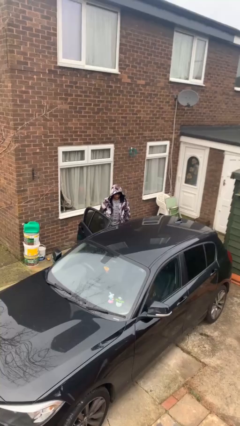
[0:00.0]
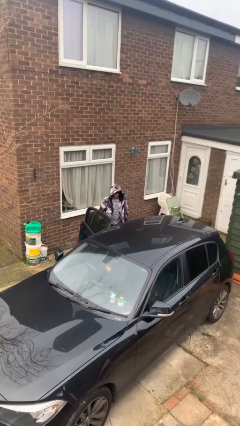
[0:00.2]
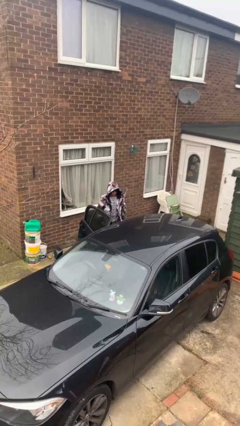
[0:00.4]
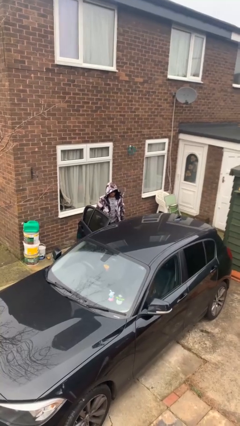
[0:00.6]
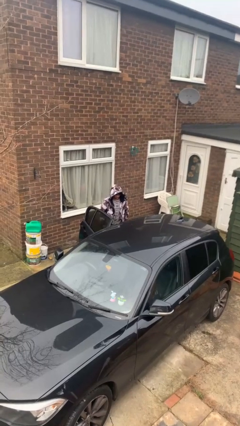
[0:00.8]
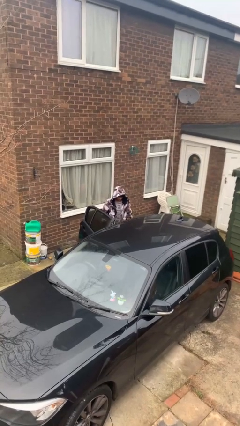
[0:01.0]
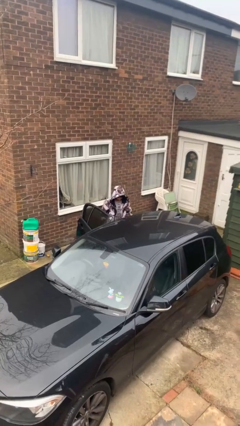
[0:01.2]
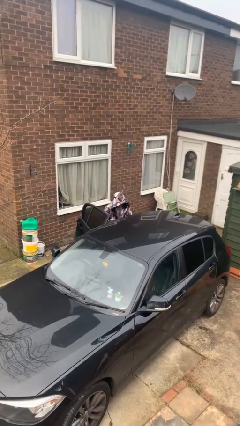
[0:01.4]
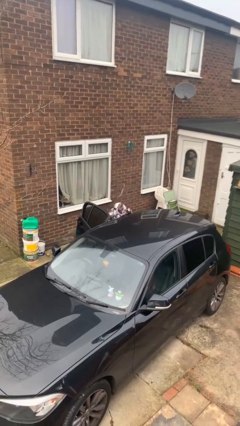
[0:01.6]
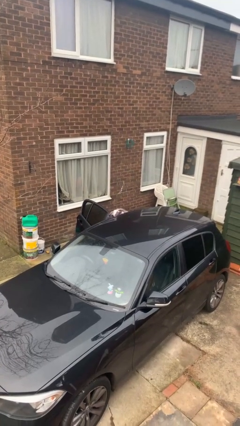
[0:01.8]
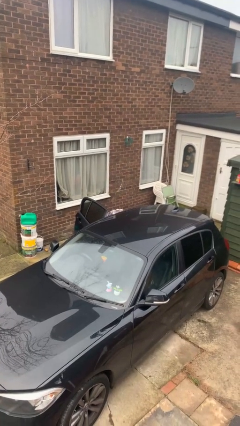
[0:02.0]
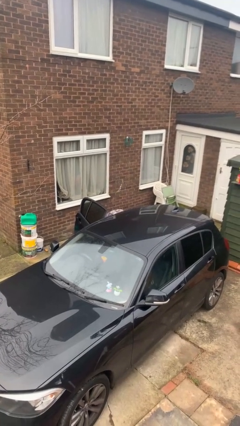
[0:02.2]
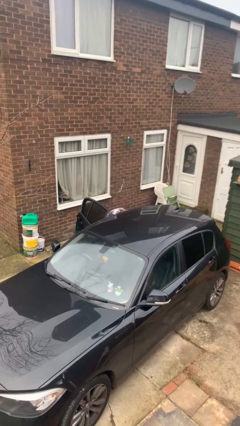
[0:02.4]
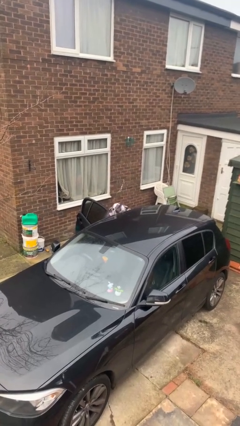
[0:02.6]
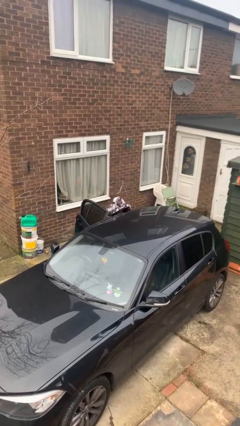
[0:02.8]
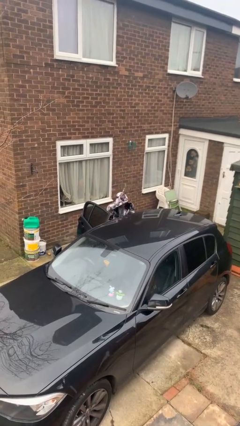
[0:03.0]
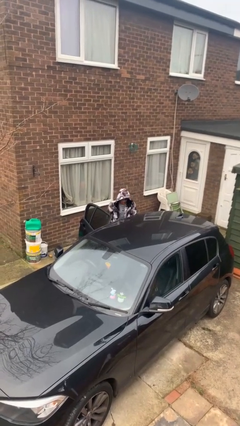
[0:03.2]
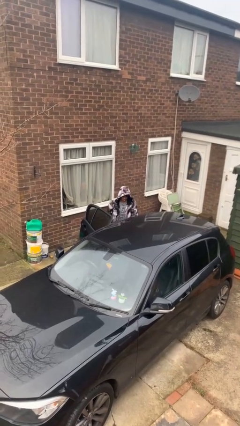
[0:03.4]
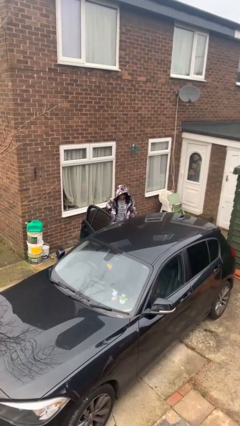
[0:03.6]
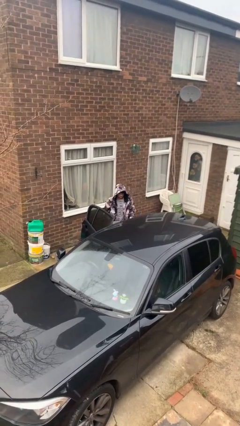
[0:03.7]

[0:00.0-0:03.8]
person unloads car

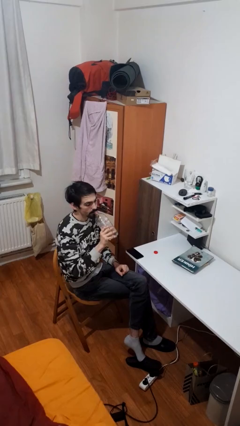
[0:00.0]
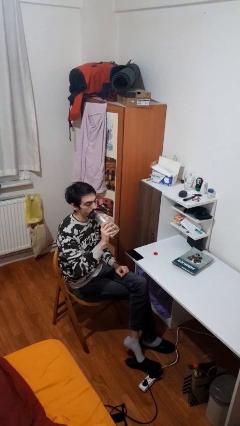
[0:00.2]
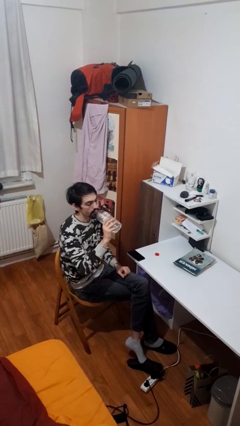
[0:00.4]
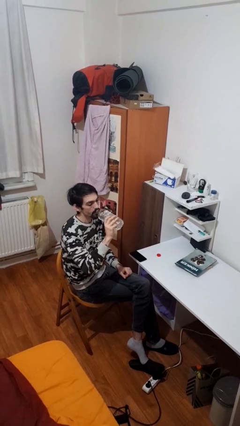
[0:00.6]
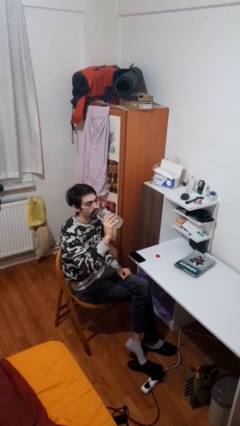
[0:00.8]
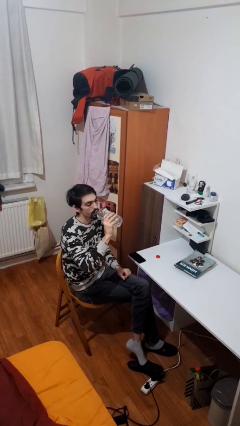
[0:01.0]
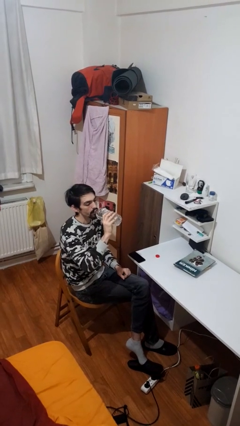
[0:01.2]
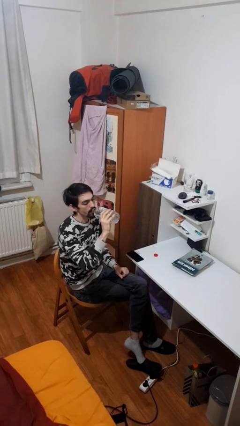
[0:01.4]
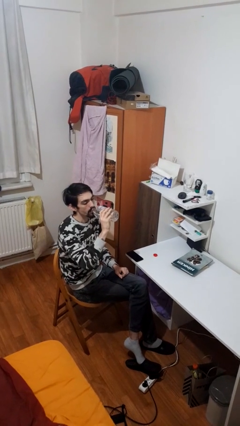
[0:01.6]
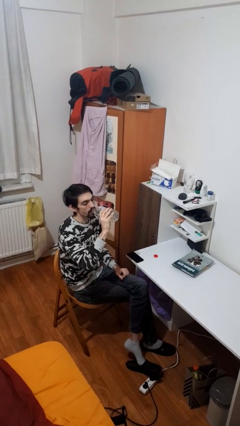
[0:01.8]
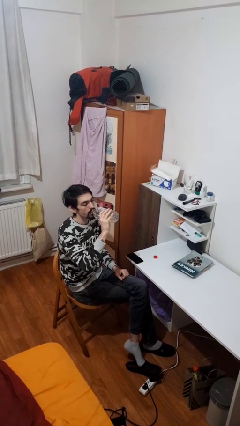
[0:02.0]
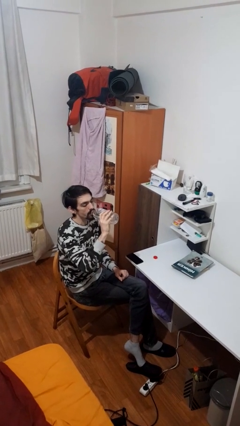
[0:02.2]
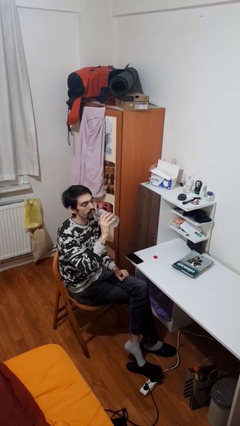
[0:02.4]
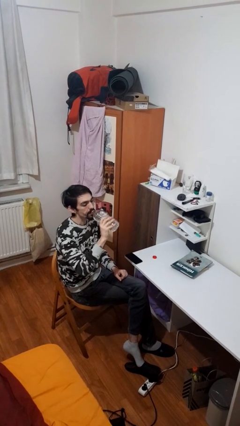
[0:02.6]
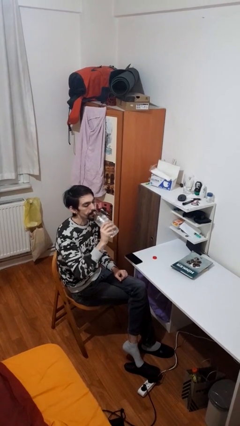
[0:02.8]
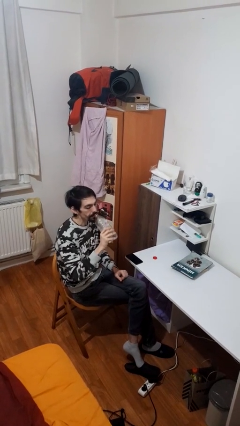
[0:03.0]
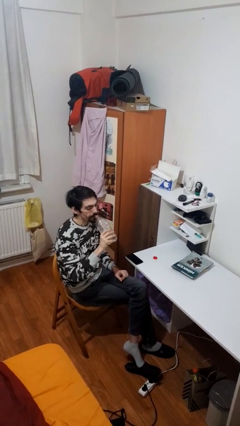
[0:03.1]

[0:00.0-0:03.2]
person drinks from bottle

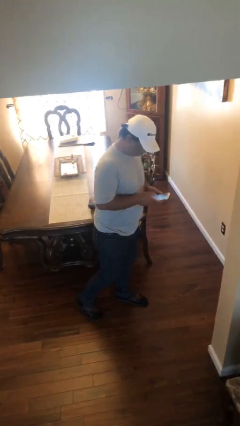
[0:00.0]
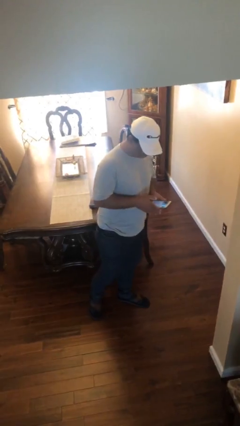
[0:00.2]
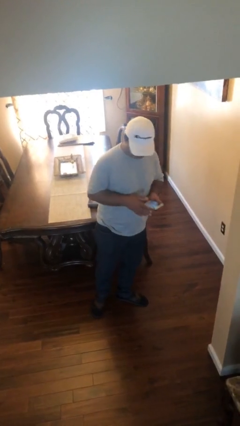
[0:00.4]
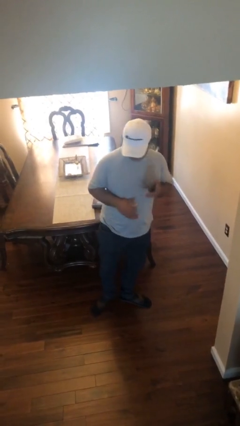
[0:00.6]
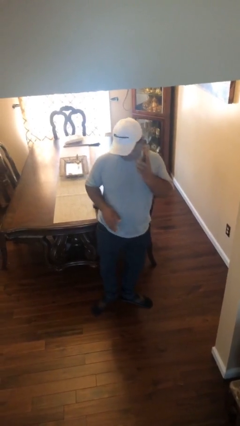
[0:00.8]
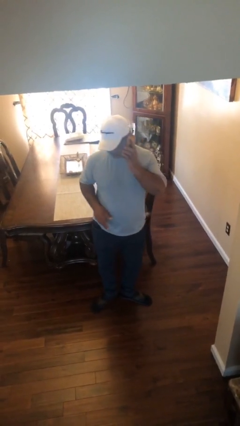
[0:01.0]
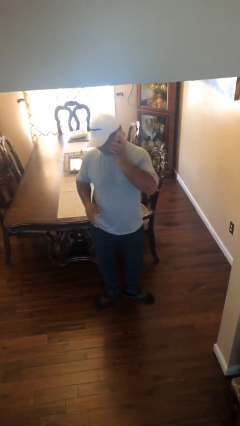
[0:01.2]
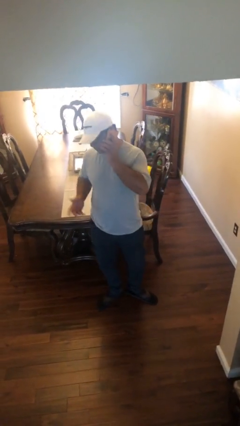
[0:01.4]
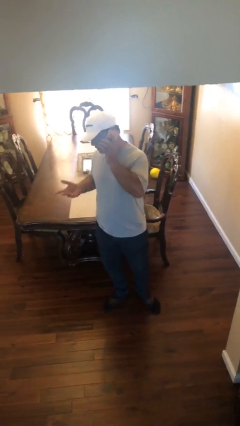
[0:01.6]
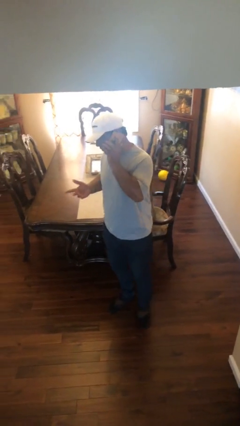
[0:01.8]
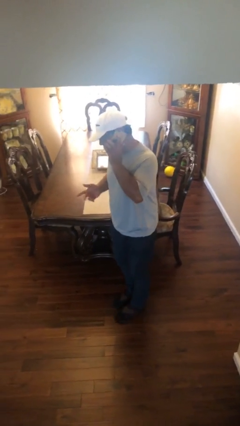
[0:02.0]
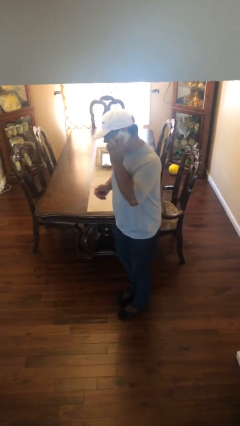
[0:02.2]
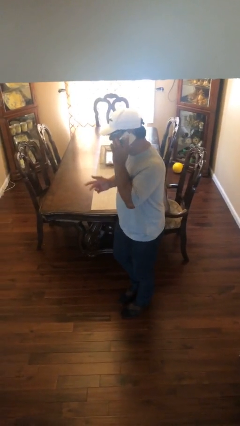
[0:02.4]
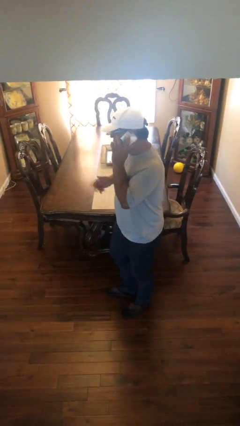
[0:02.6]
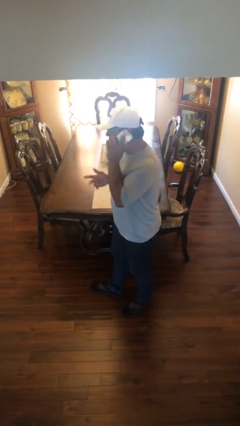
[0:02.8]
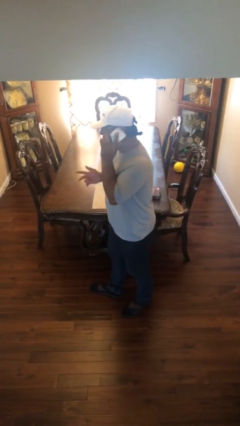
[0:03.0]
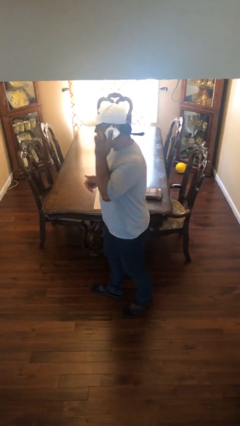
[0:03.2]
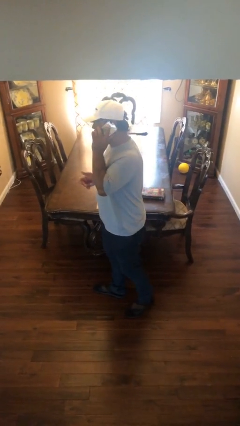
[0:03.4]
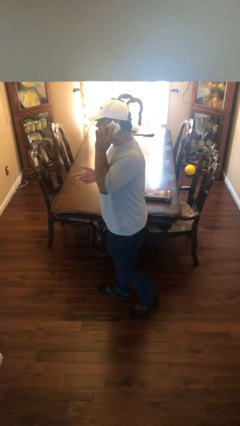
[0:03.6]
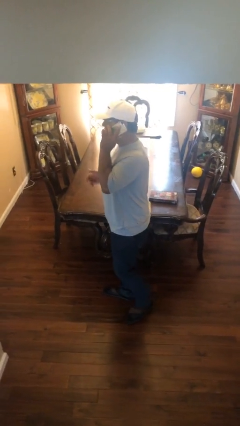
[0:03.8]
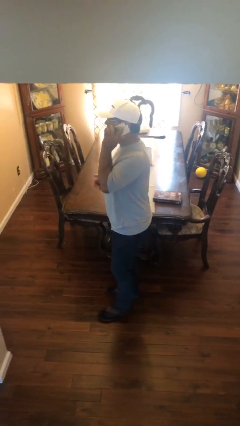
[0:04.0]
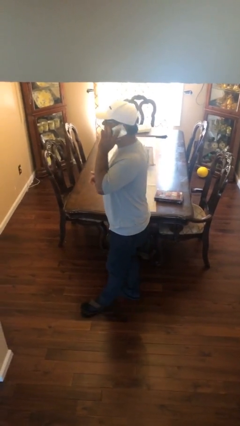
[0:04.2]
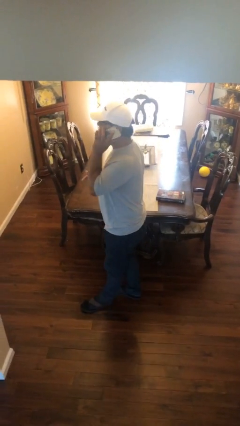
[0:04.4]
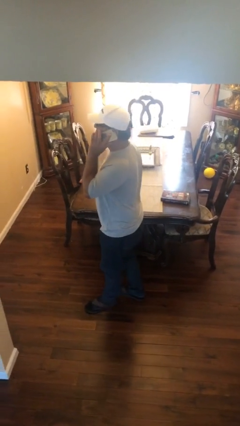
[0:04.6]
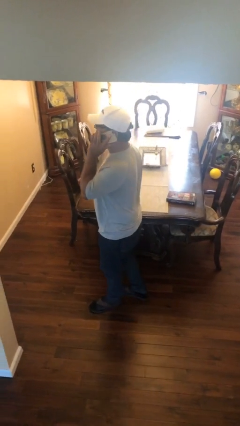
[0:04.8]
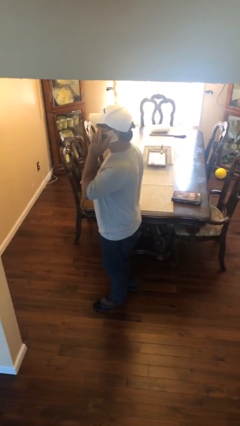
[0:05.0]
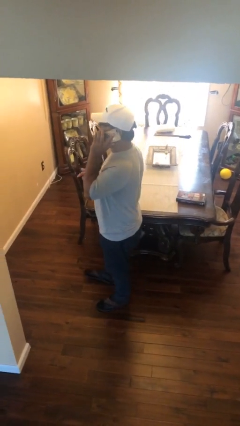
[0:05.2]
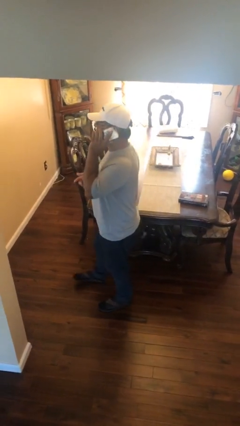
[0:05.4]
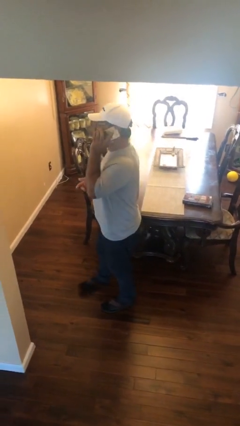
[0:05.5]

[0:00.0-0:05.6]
person talks on phone

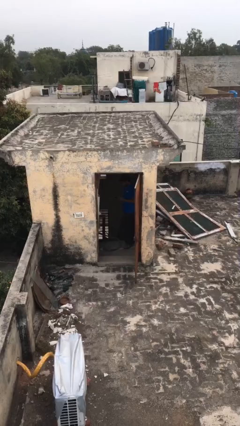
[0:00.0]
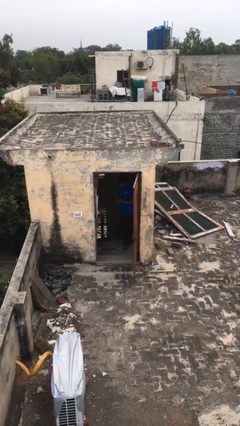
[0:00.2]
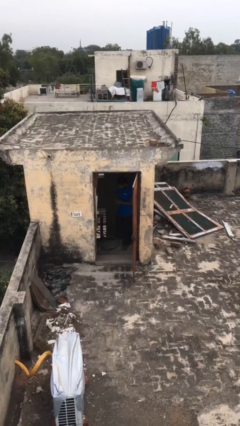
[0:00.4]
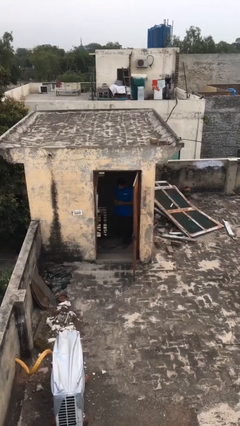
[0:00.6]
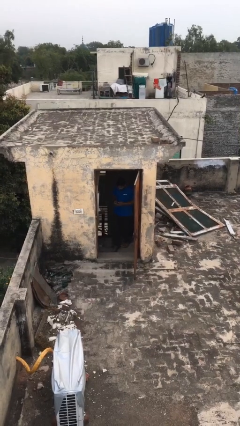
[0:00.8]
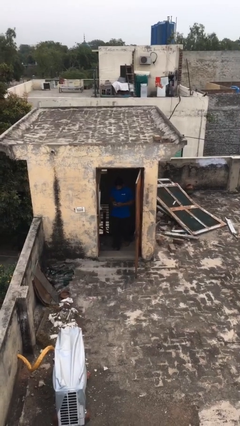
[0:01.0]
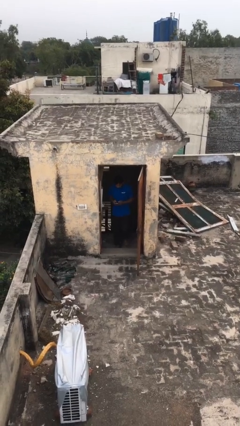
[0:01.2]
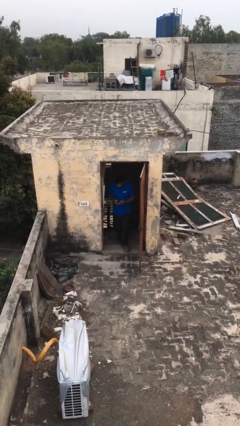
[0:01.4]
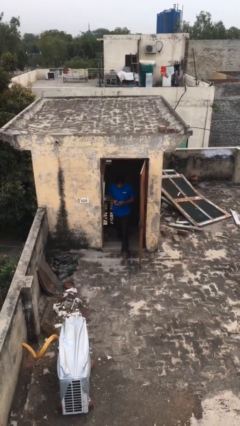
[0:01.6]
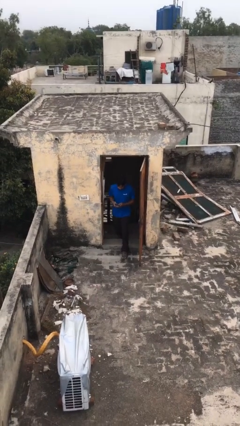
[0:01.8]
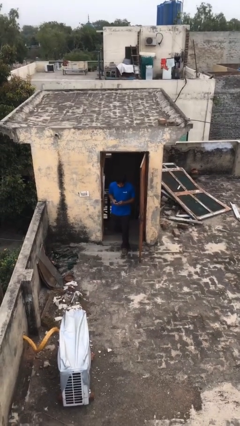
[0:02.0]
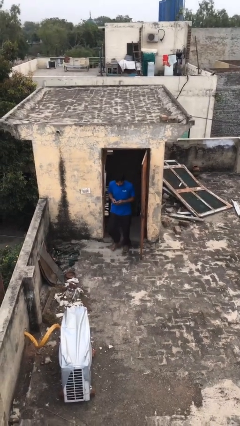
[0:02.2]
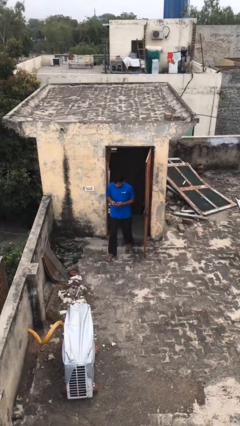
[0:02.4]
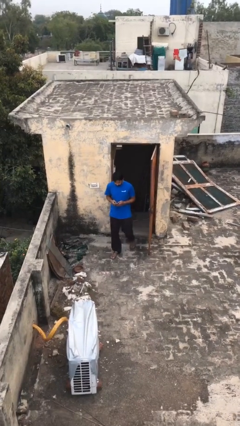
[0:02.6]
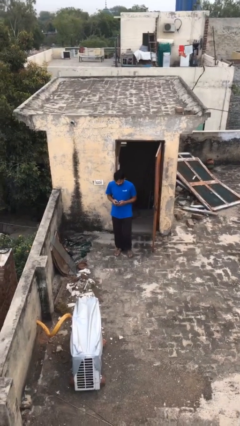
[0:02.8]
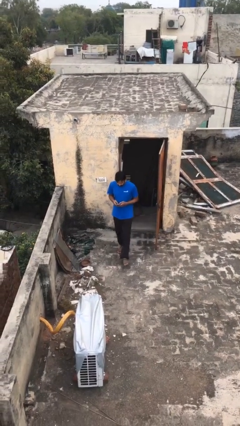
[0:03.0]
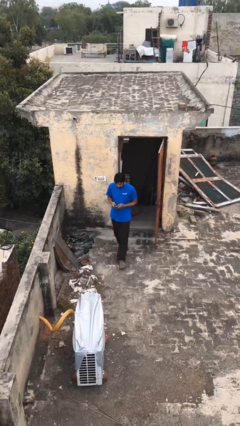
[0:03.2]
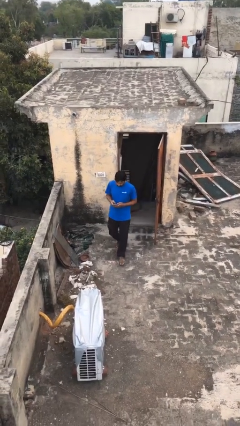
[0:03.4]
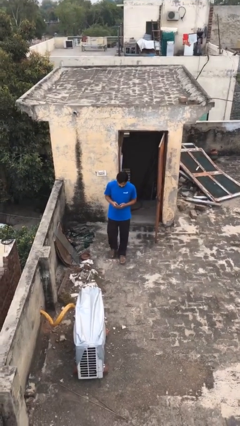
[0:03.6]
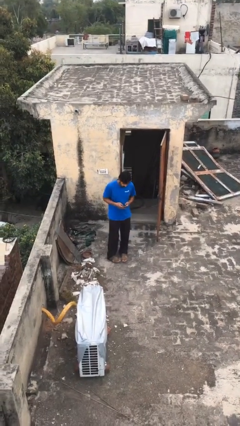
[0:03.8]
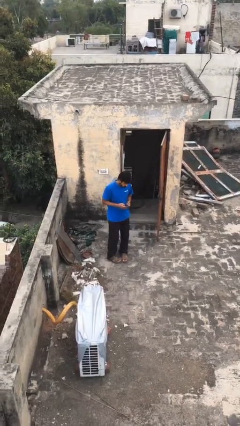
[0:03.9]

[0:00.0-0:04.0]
person enters scene through structure

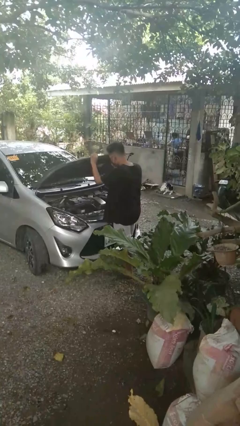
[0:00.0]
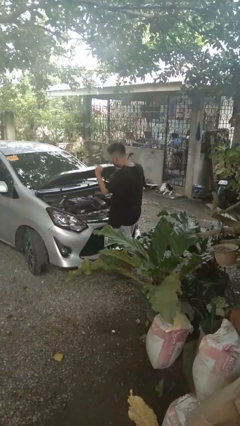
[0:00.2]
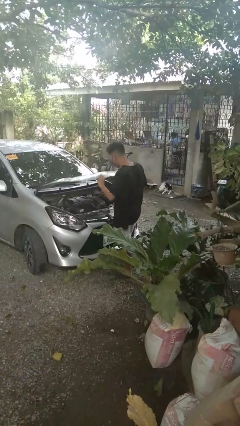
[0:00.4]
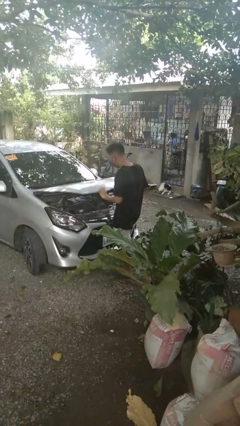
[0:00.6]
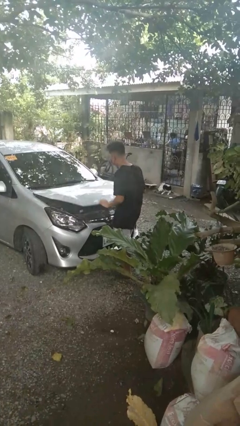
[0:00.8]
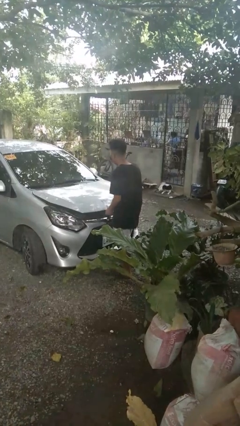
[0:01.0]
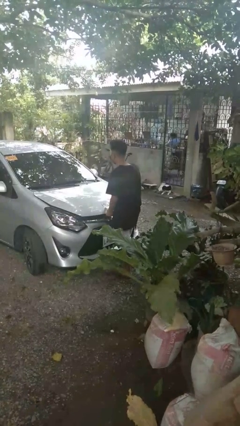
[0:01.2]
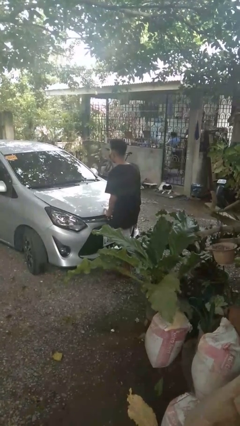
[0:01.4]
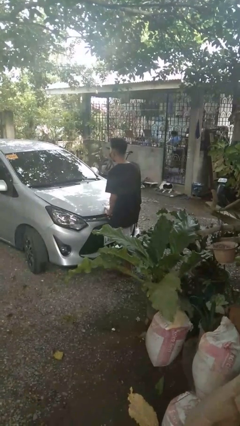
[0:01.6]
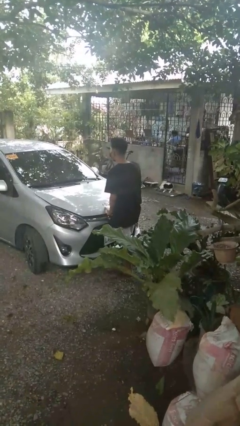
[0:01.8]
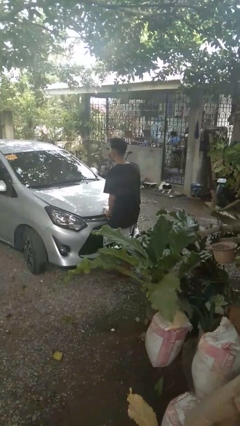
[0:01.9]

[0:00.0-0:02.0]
person closes car hood
